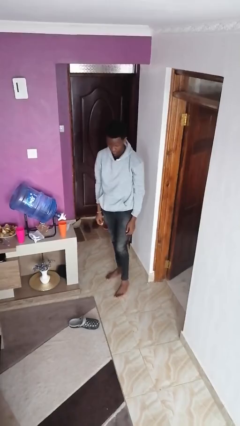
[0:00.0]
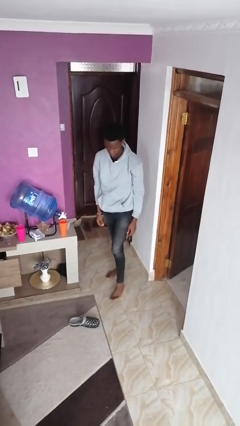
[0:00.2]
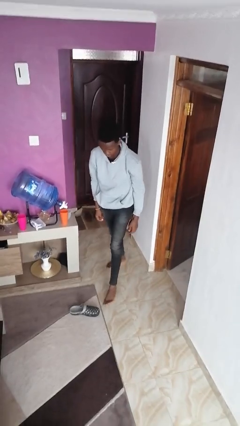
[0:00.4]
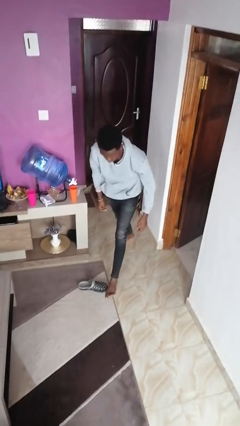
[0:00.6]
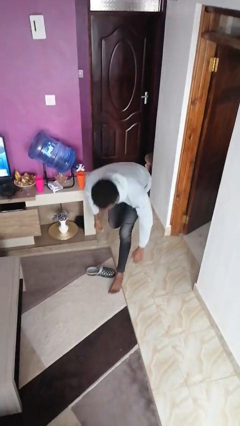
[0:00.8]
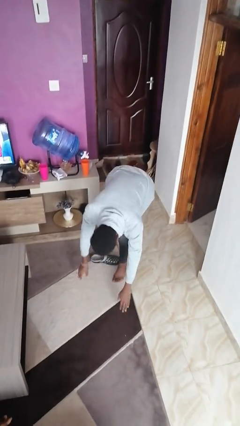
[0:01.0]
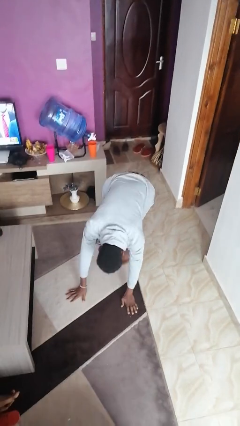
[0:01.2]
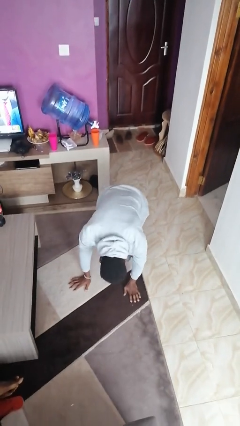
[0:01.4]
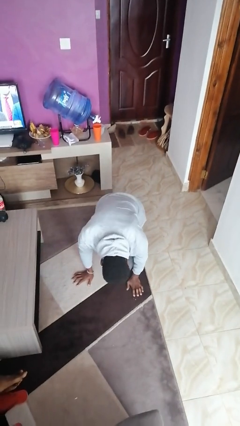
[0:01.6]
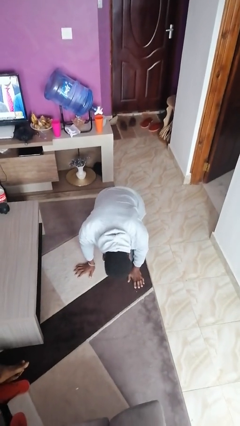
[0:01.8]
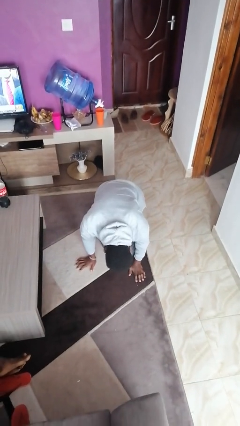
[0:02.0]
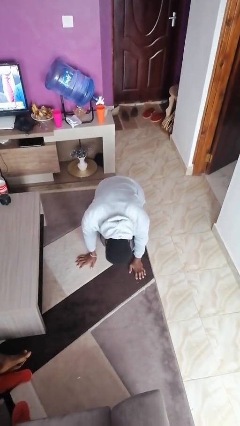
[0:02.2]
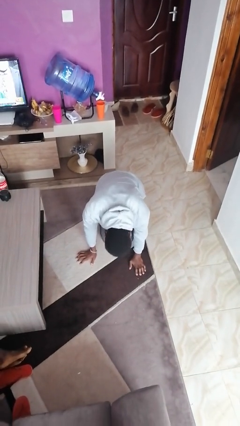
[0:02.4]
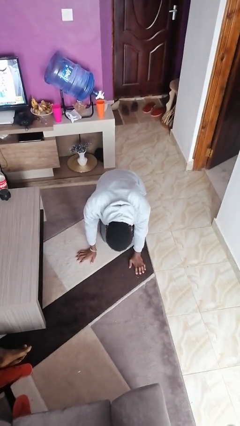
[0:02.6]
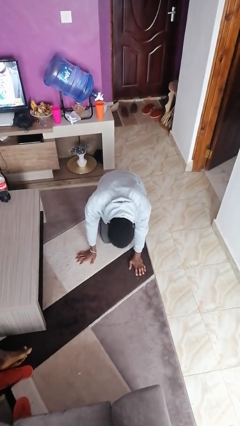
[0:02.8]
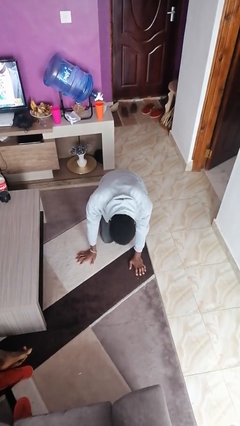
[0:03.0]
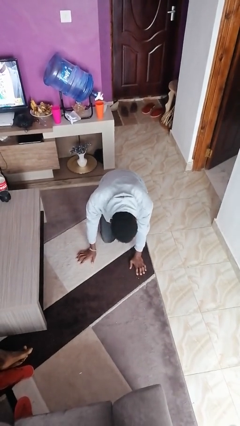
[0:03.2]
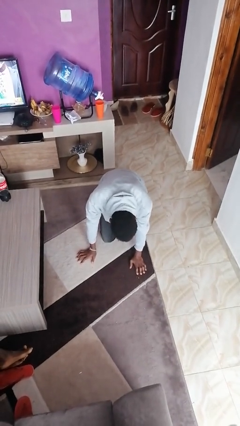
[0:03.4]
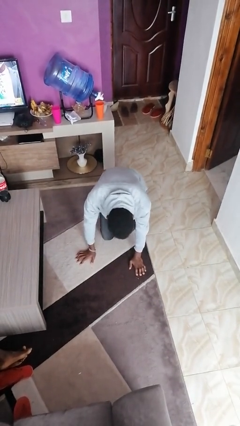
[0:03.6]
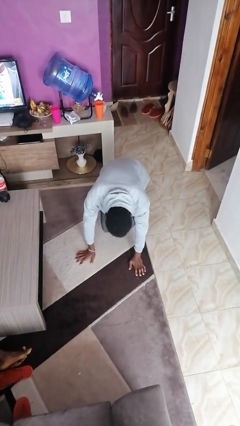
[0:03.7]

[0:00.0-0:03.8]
person trips on object on floor

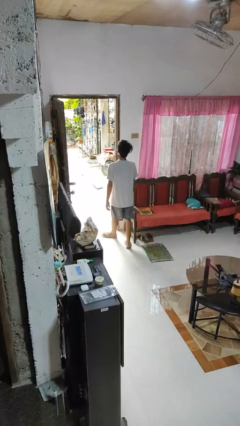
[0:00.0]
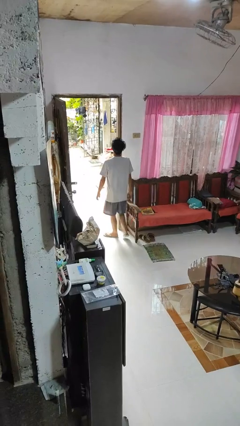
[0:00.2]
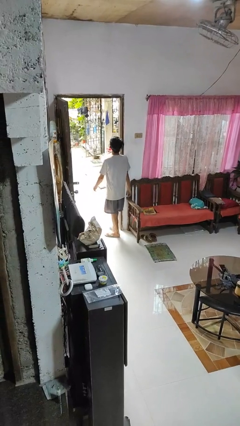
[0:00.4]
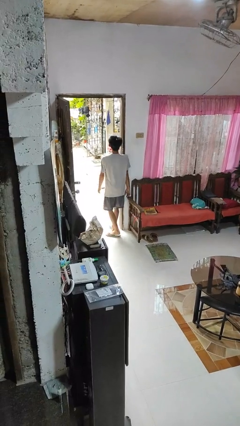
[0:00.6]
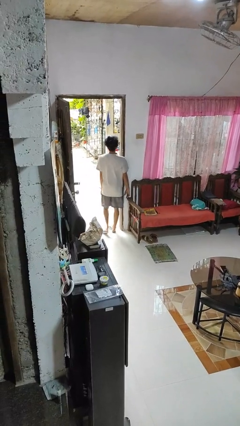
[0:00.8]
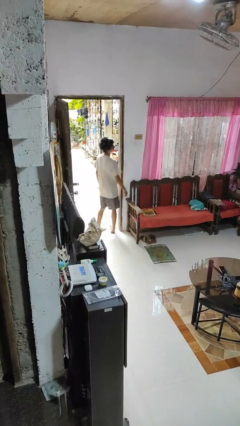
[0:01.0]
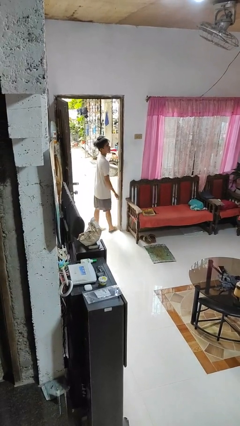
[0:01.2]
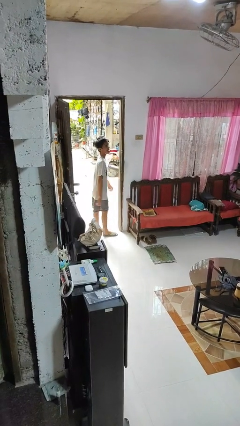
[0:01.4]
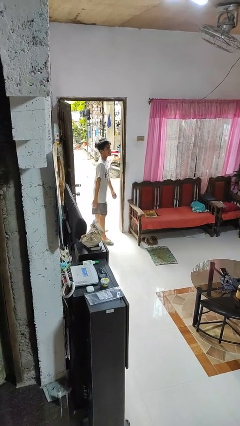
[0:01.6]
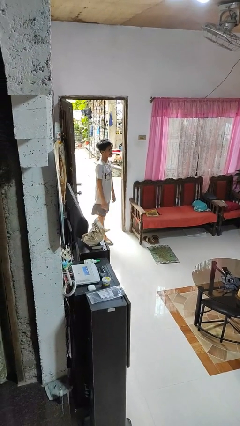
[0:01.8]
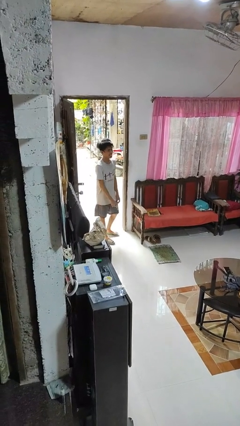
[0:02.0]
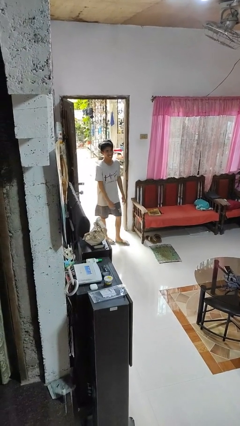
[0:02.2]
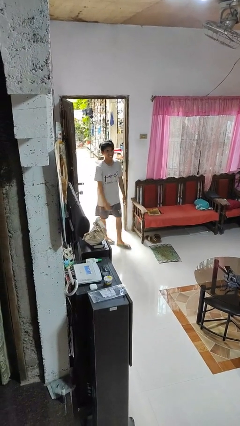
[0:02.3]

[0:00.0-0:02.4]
person bumps into wall

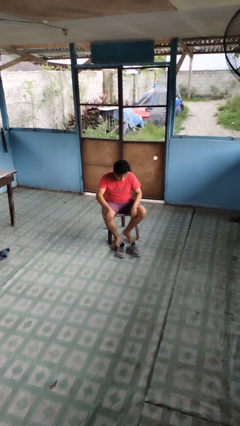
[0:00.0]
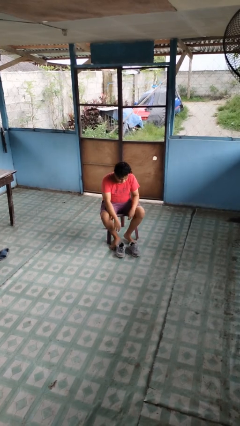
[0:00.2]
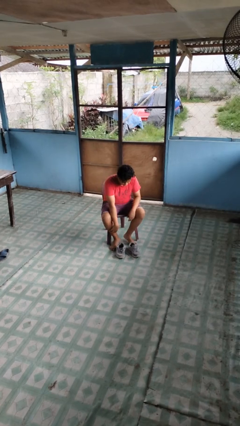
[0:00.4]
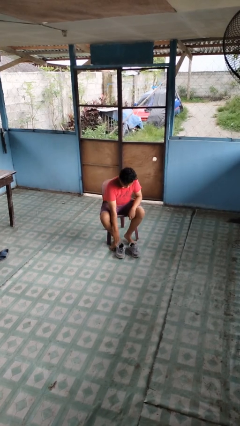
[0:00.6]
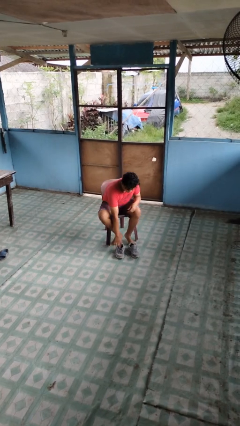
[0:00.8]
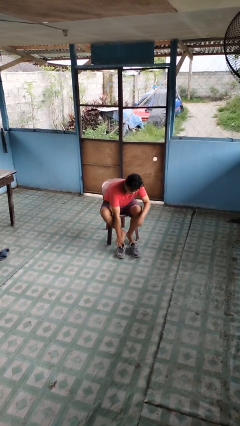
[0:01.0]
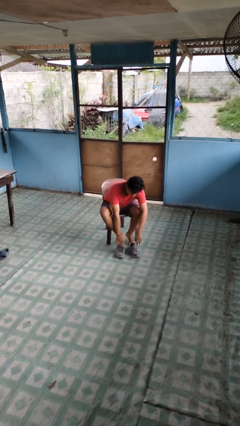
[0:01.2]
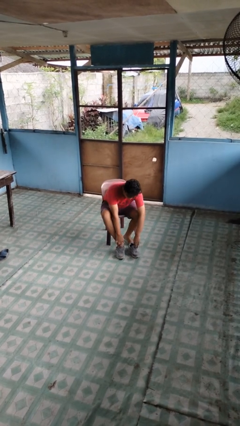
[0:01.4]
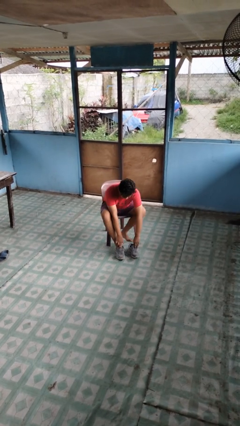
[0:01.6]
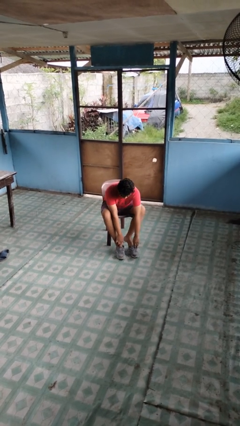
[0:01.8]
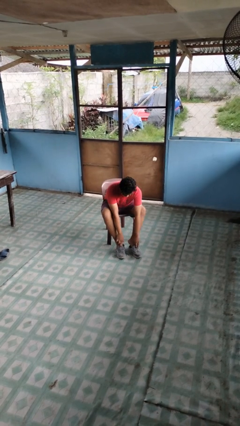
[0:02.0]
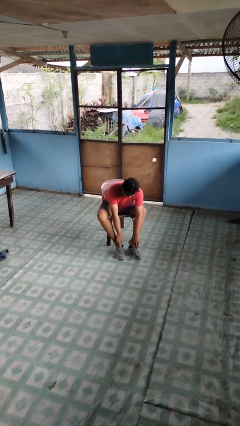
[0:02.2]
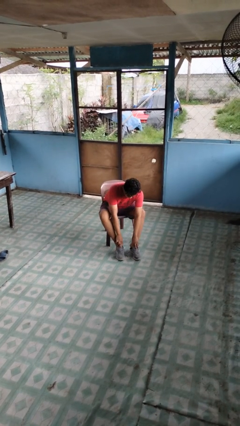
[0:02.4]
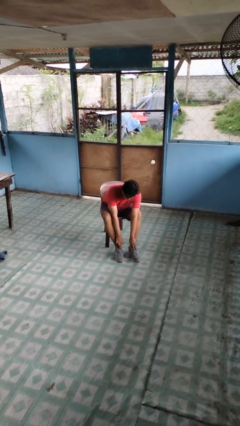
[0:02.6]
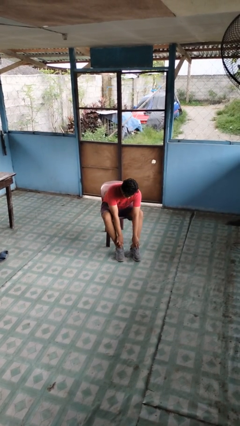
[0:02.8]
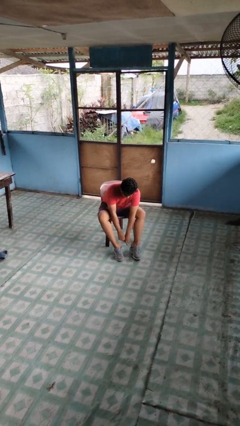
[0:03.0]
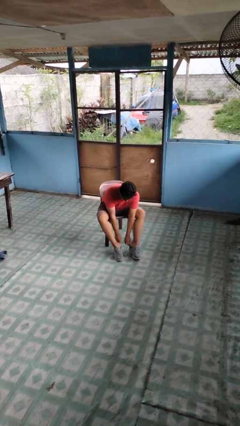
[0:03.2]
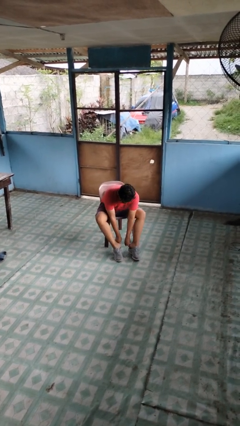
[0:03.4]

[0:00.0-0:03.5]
person puts on shoes

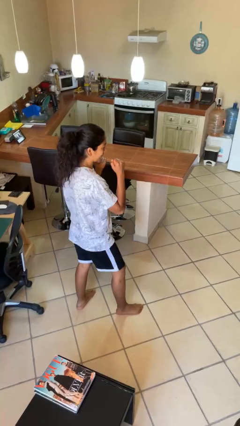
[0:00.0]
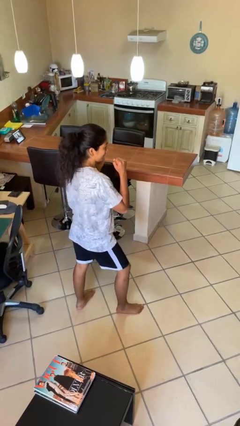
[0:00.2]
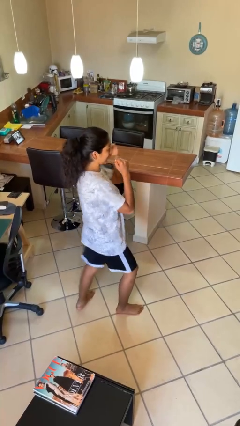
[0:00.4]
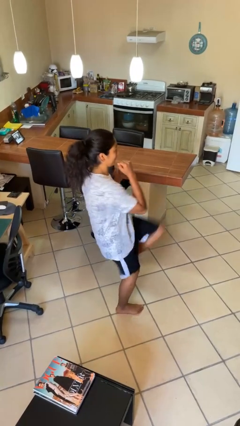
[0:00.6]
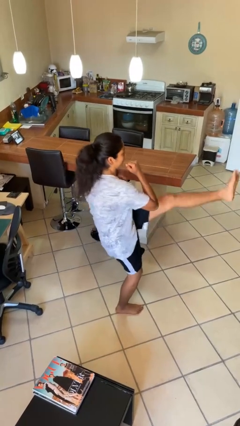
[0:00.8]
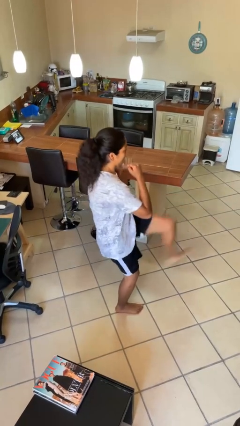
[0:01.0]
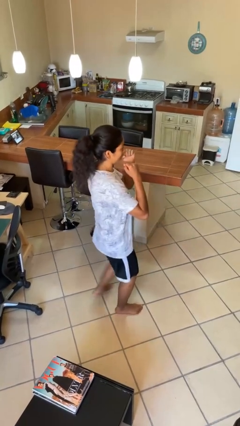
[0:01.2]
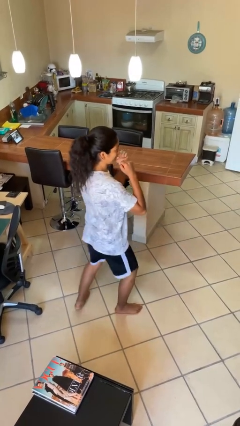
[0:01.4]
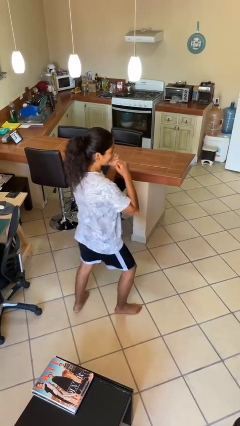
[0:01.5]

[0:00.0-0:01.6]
person karate kicks

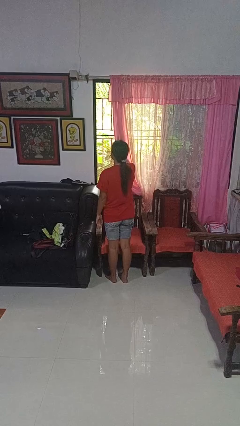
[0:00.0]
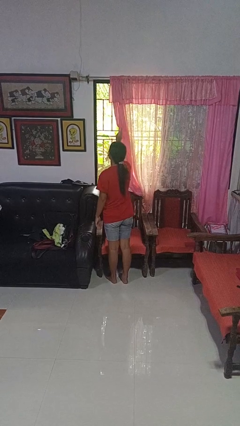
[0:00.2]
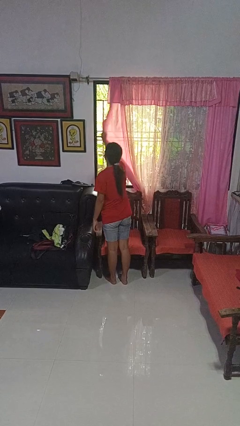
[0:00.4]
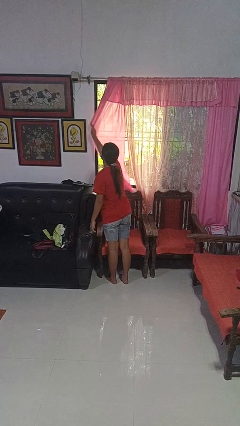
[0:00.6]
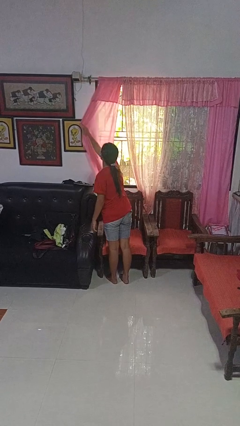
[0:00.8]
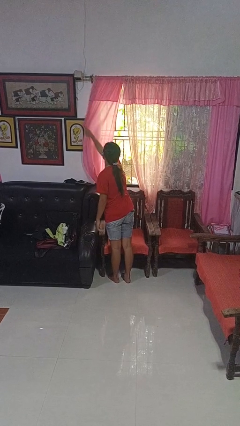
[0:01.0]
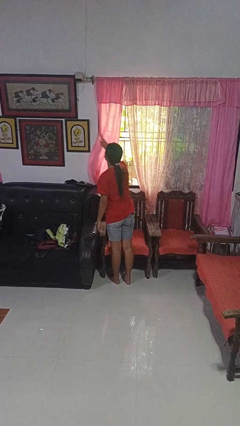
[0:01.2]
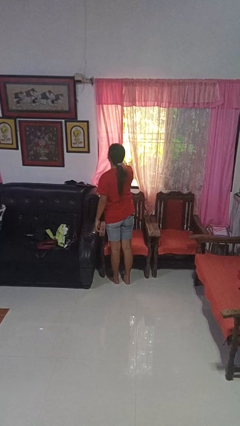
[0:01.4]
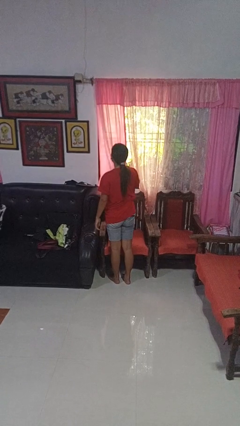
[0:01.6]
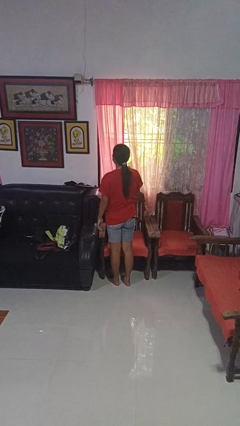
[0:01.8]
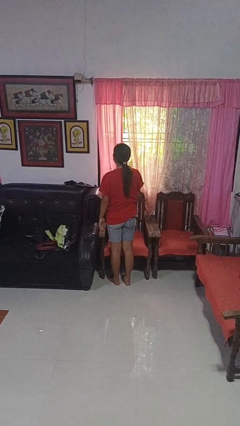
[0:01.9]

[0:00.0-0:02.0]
person closes curtains

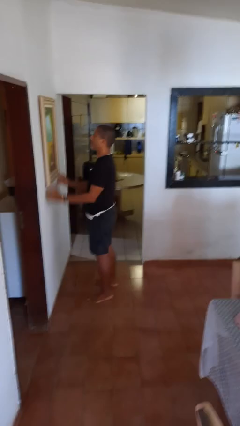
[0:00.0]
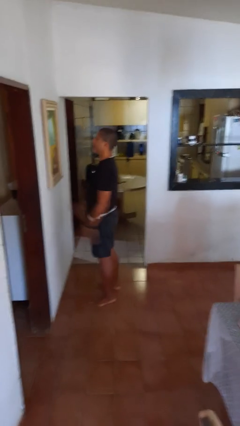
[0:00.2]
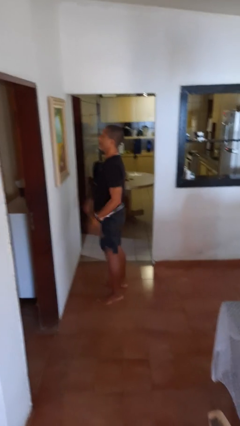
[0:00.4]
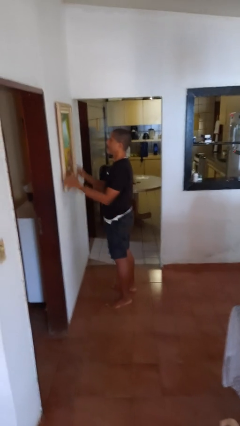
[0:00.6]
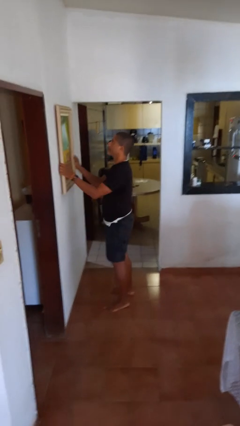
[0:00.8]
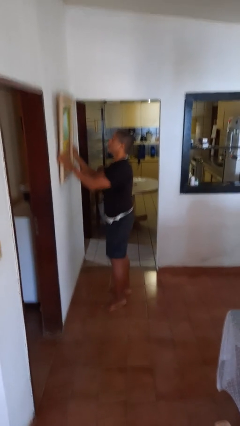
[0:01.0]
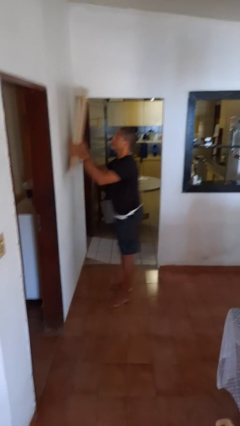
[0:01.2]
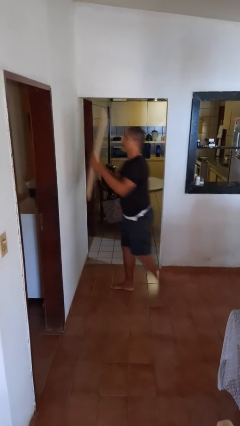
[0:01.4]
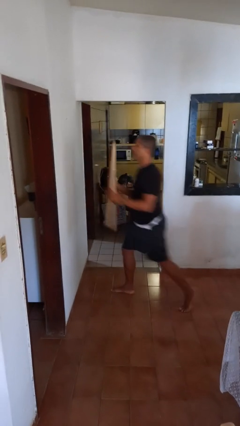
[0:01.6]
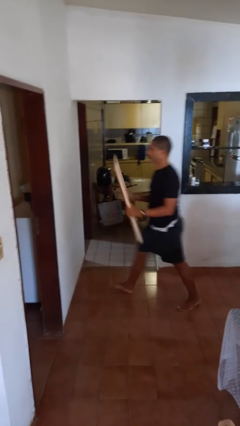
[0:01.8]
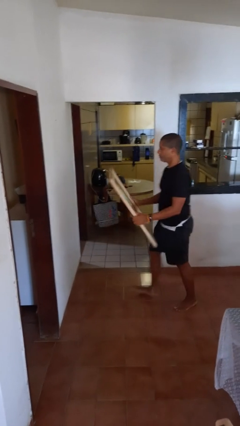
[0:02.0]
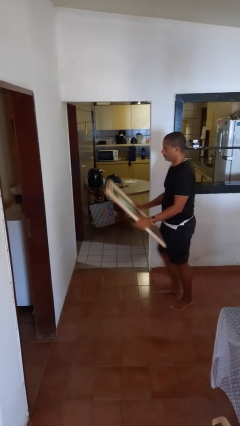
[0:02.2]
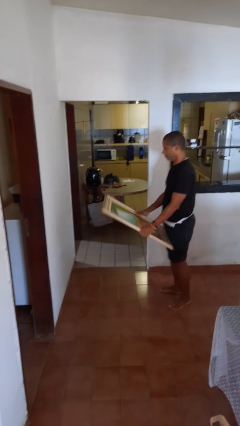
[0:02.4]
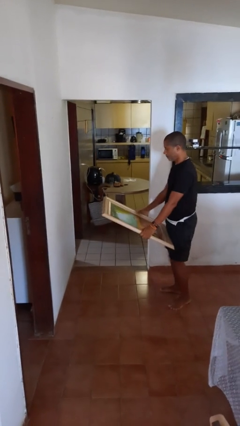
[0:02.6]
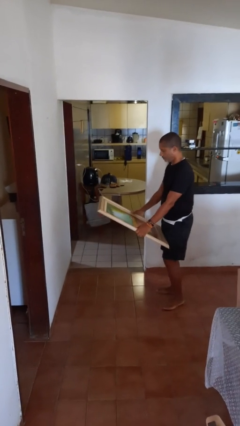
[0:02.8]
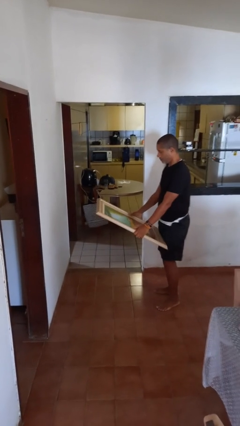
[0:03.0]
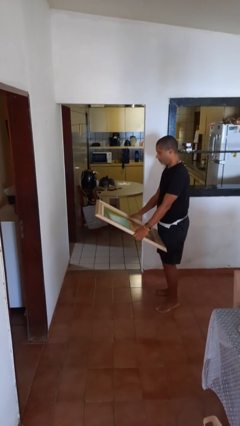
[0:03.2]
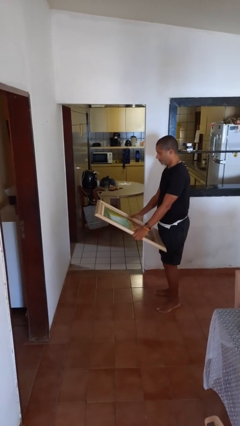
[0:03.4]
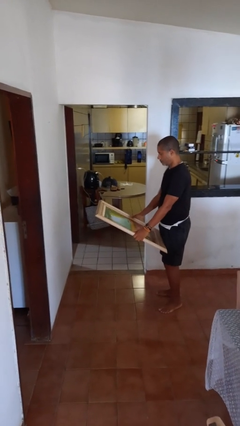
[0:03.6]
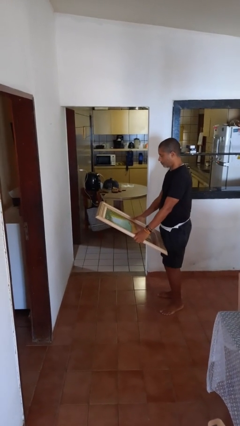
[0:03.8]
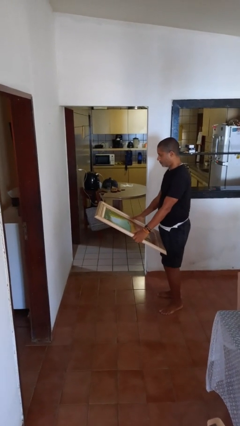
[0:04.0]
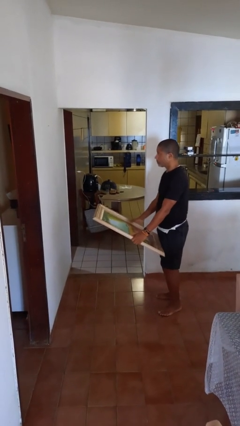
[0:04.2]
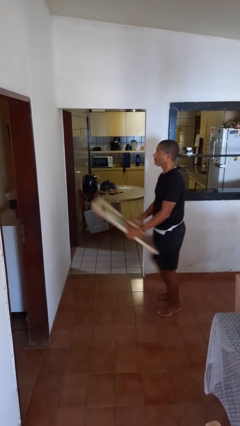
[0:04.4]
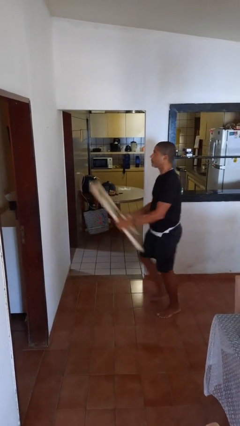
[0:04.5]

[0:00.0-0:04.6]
person takes down picture frame
